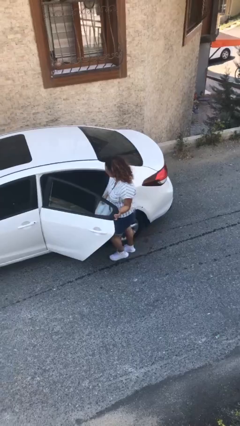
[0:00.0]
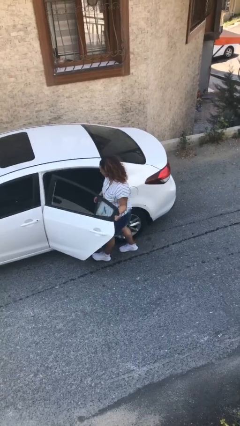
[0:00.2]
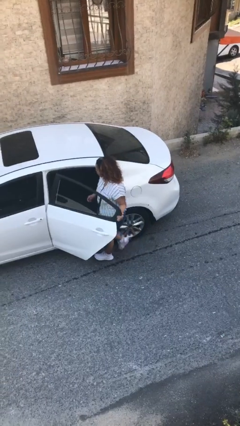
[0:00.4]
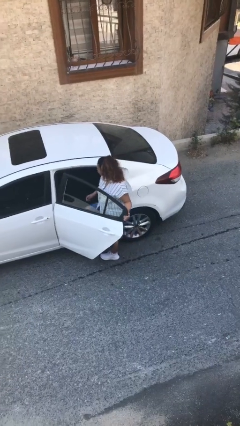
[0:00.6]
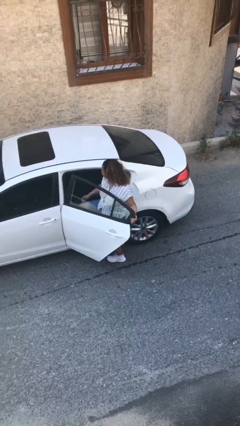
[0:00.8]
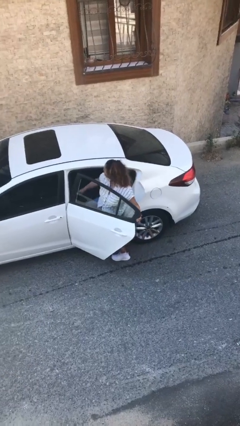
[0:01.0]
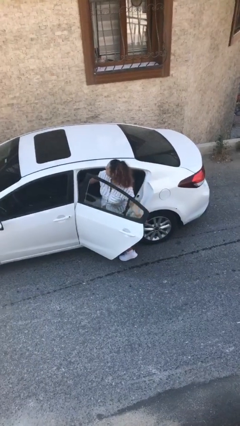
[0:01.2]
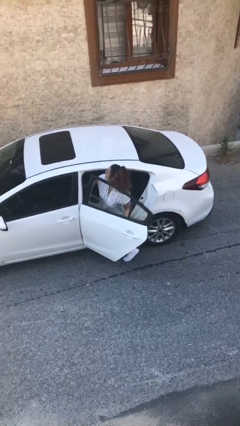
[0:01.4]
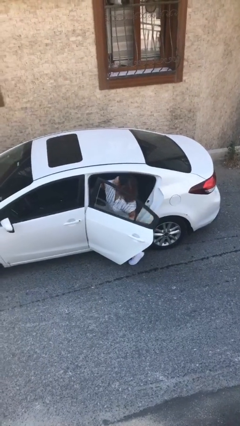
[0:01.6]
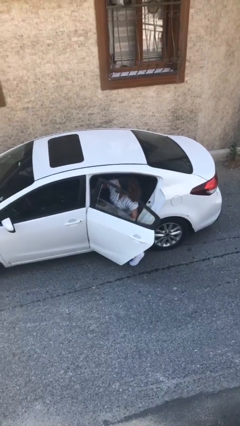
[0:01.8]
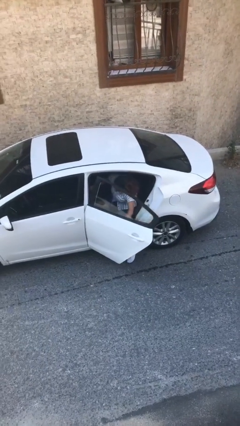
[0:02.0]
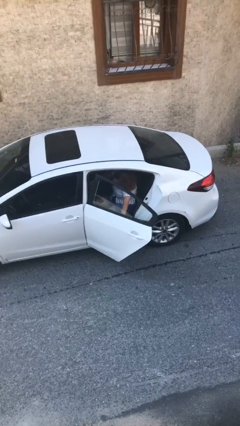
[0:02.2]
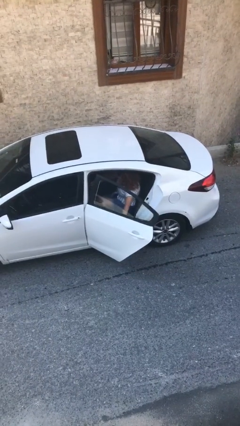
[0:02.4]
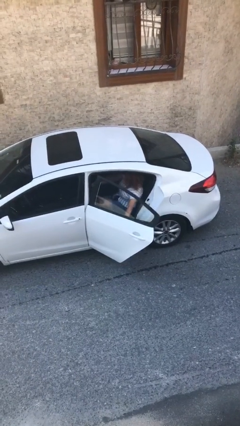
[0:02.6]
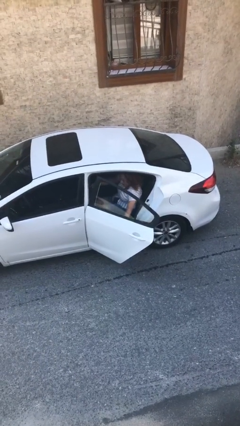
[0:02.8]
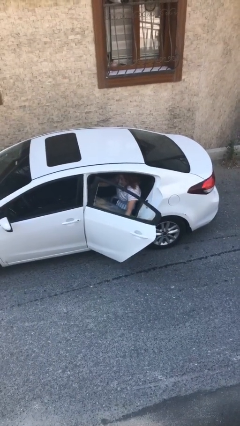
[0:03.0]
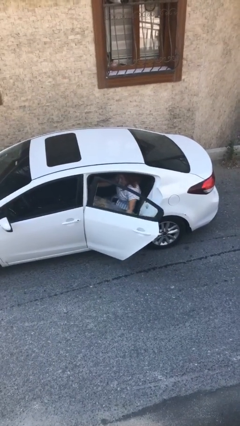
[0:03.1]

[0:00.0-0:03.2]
person enters car

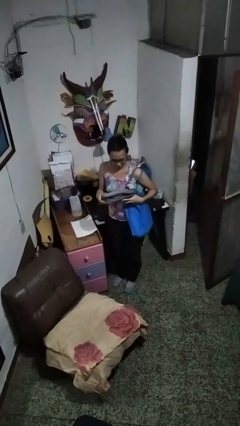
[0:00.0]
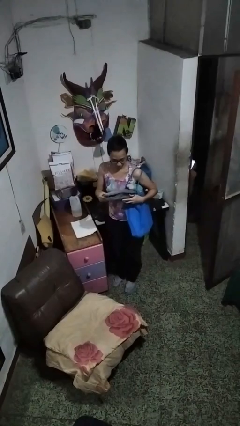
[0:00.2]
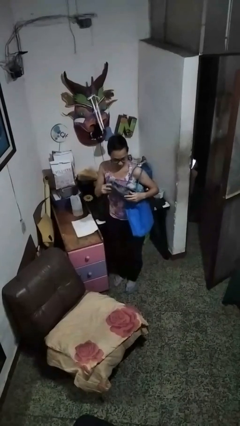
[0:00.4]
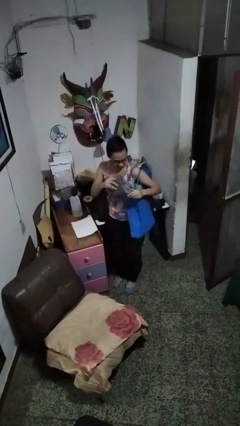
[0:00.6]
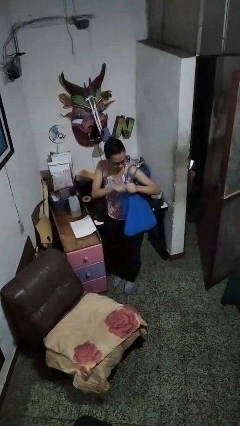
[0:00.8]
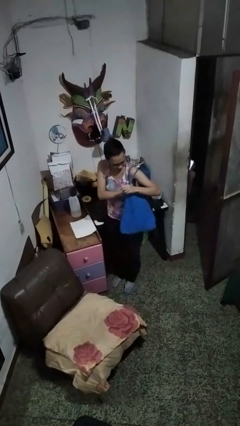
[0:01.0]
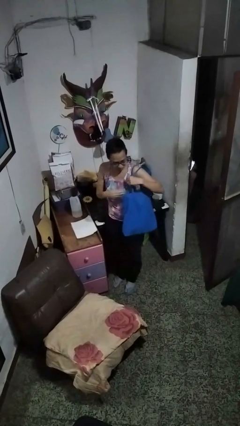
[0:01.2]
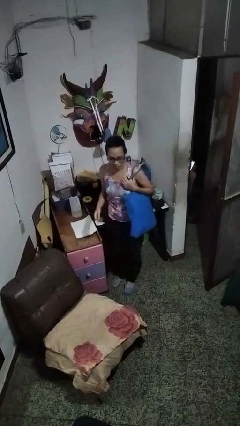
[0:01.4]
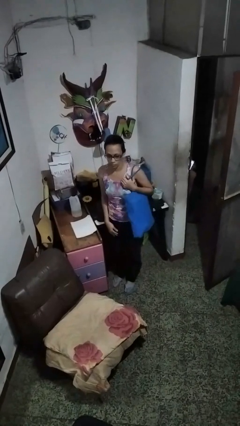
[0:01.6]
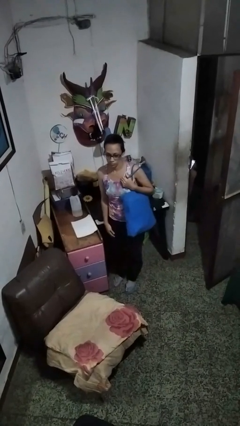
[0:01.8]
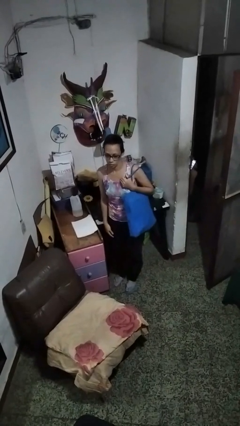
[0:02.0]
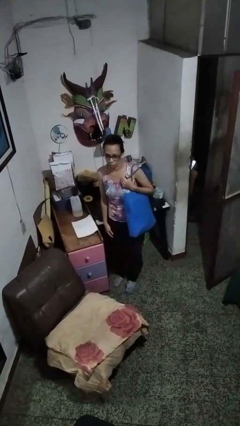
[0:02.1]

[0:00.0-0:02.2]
person puts object into bag

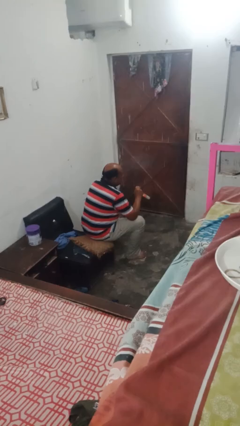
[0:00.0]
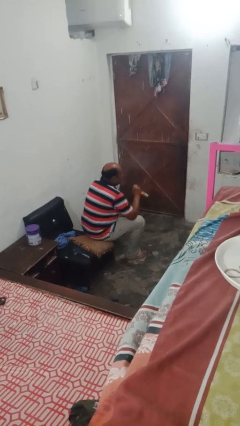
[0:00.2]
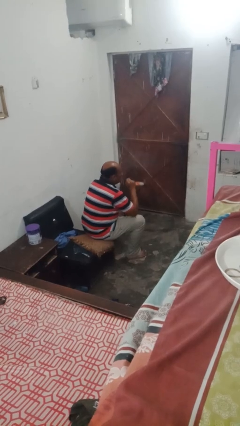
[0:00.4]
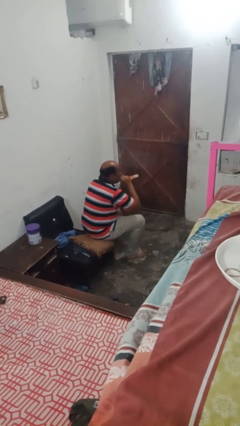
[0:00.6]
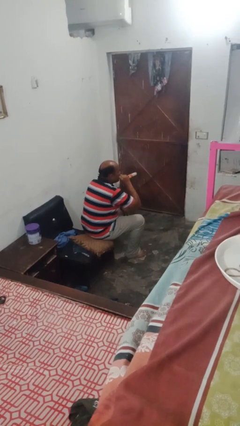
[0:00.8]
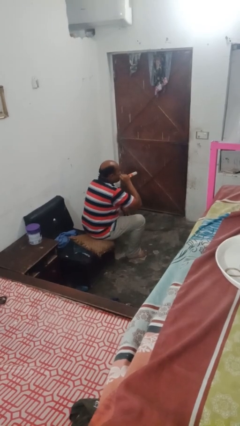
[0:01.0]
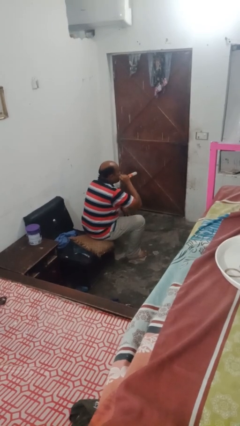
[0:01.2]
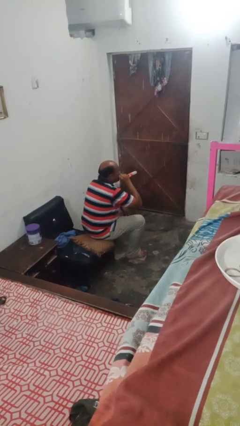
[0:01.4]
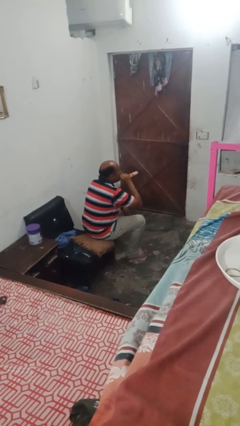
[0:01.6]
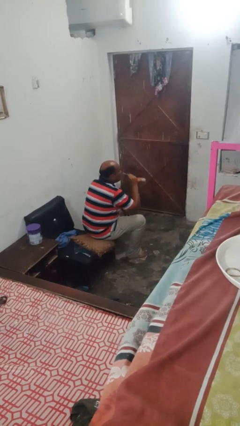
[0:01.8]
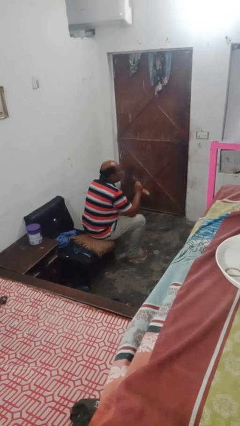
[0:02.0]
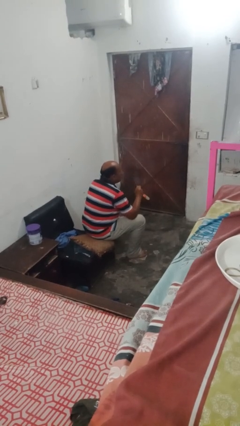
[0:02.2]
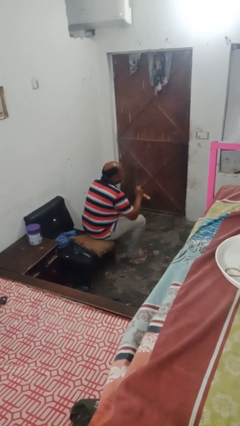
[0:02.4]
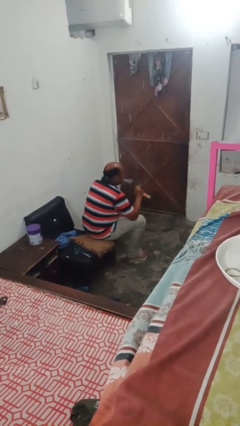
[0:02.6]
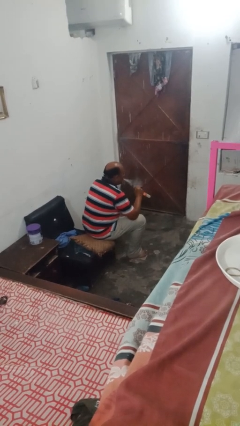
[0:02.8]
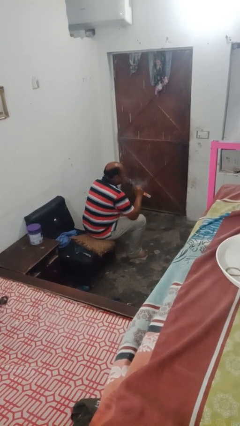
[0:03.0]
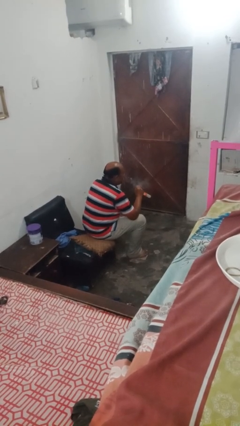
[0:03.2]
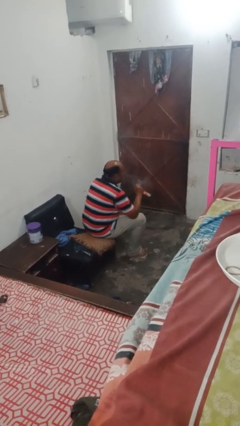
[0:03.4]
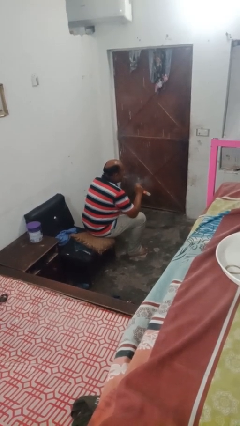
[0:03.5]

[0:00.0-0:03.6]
person vapes

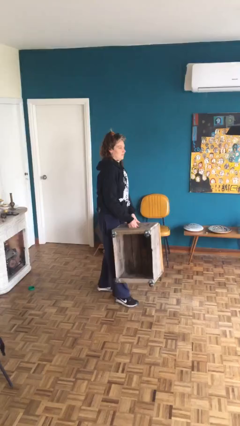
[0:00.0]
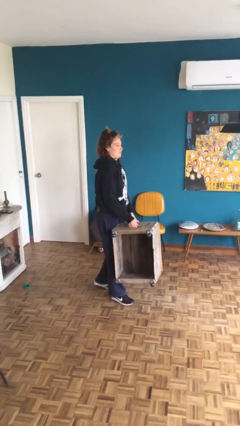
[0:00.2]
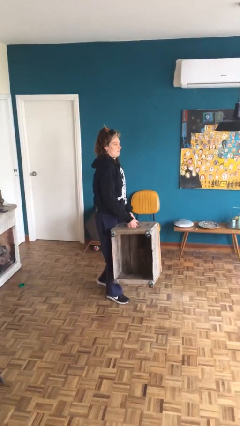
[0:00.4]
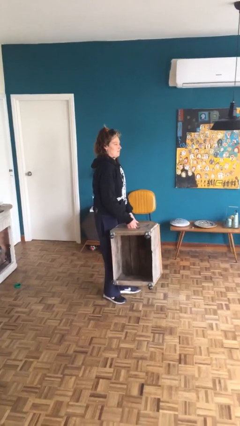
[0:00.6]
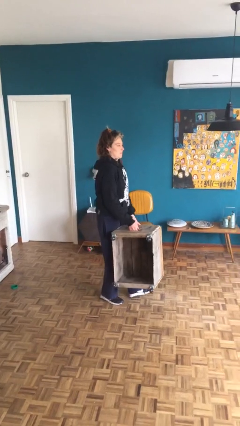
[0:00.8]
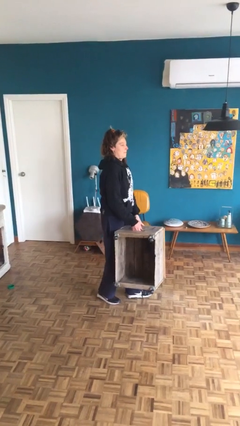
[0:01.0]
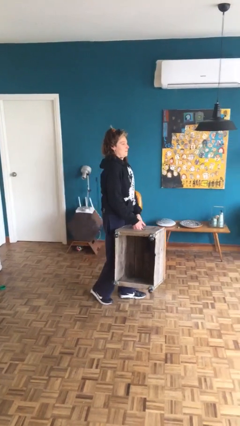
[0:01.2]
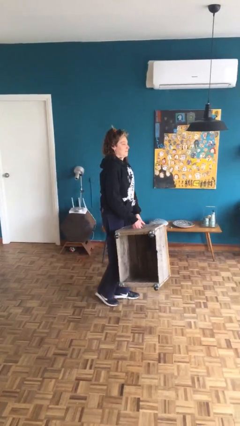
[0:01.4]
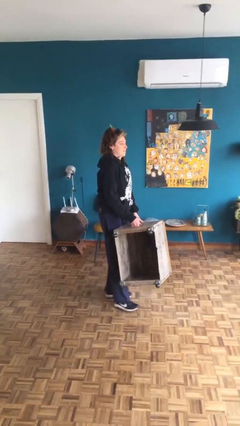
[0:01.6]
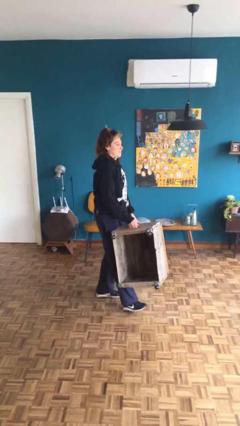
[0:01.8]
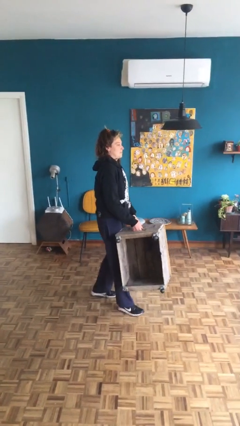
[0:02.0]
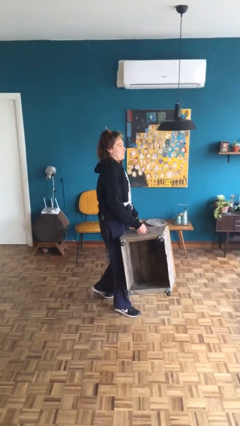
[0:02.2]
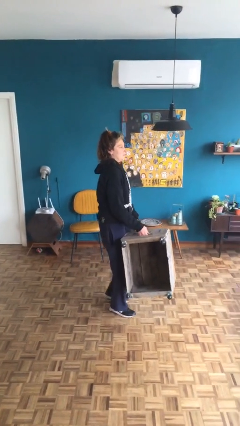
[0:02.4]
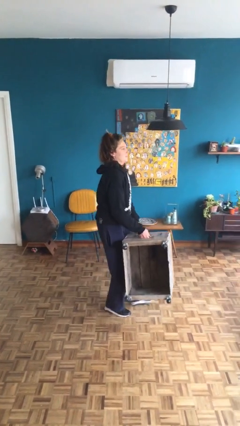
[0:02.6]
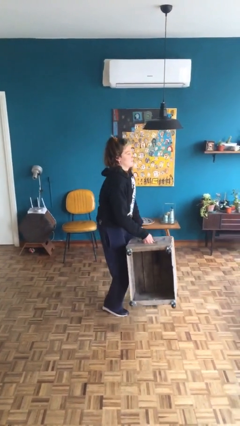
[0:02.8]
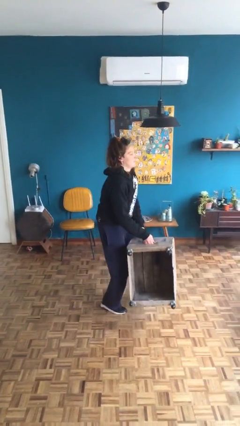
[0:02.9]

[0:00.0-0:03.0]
person carries heavy object

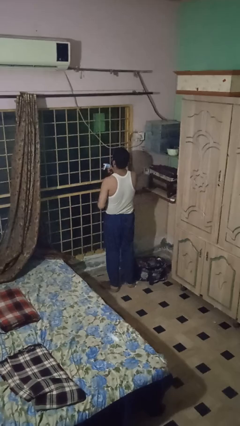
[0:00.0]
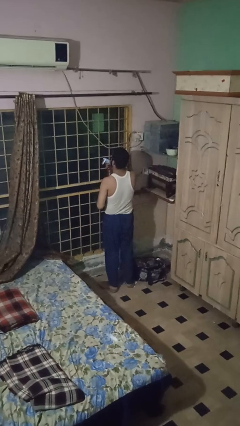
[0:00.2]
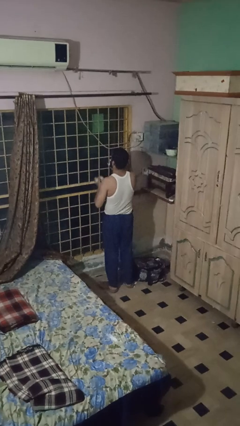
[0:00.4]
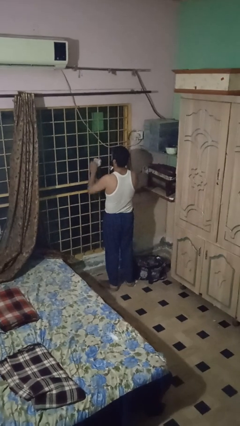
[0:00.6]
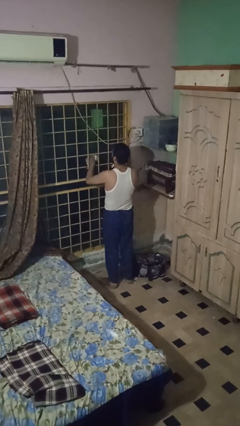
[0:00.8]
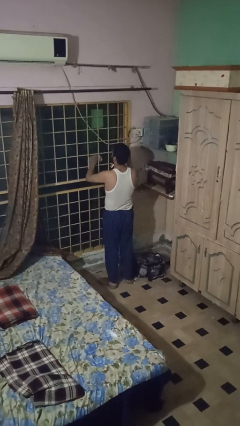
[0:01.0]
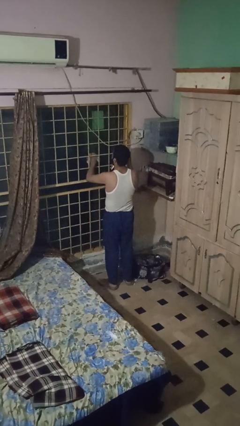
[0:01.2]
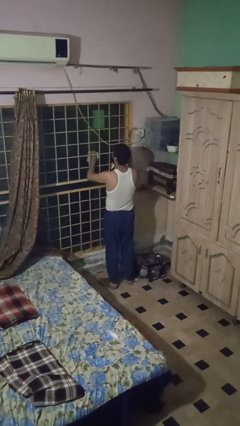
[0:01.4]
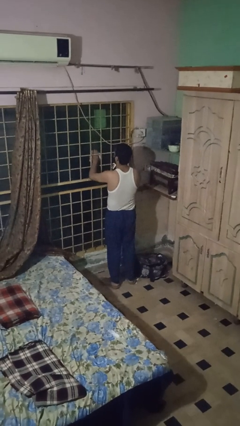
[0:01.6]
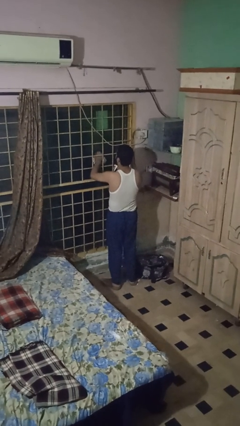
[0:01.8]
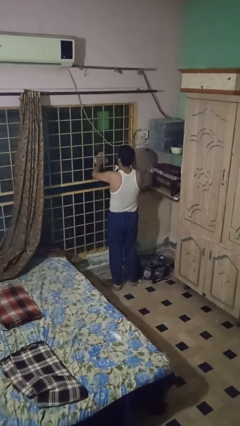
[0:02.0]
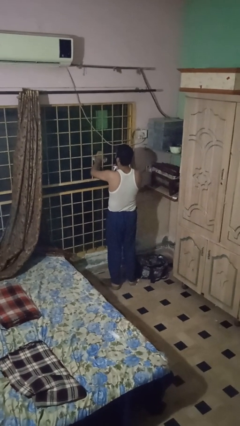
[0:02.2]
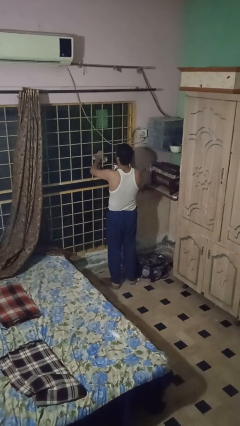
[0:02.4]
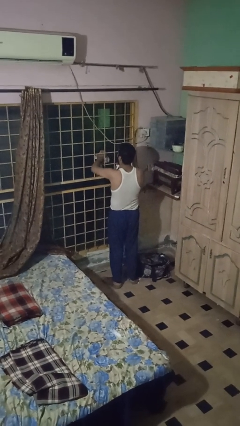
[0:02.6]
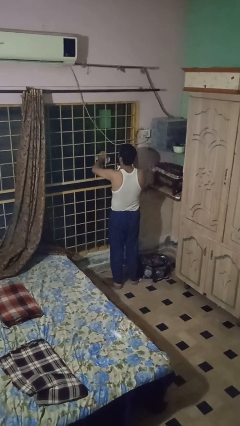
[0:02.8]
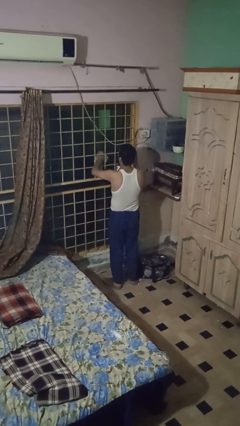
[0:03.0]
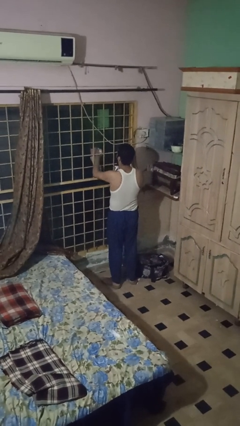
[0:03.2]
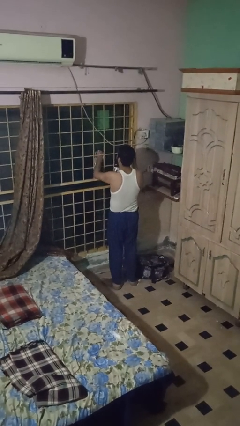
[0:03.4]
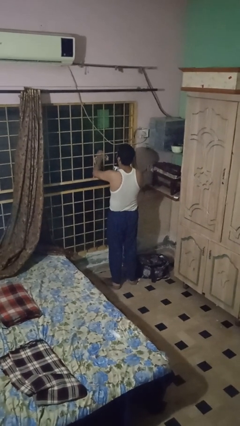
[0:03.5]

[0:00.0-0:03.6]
person washes window

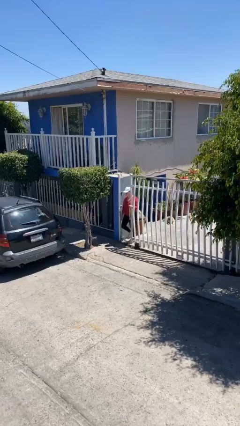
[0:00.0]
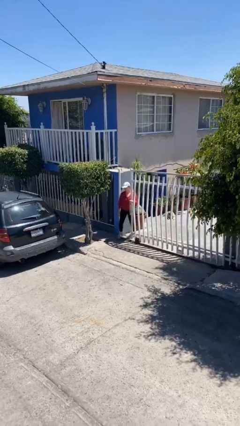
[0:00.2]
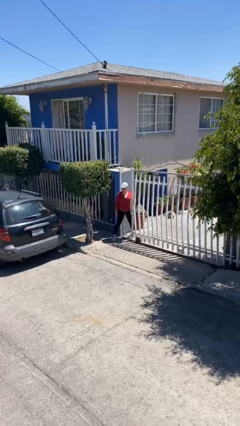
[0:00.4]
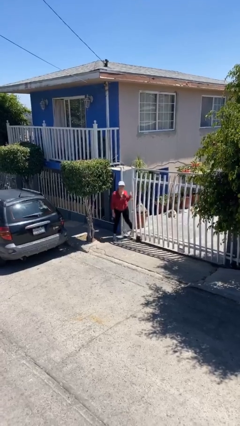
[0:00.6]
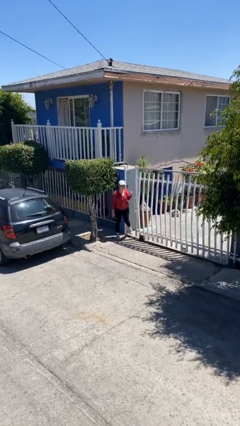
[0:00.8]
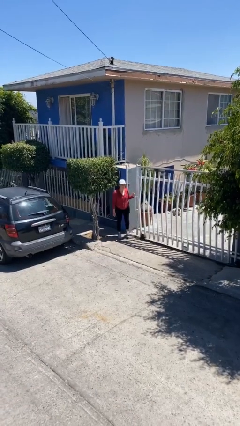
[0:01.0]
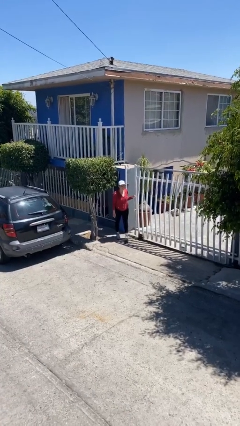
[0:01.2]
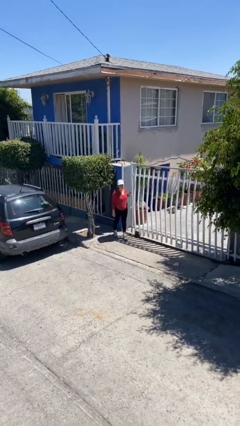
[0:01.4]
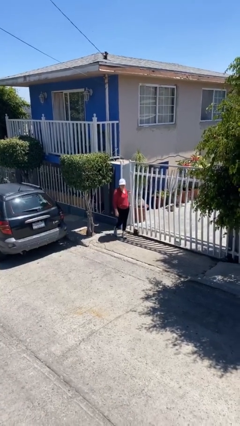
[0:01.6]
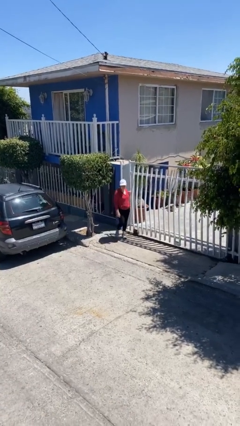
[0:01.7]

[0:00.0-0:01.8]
person enters scene through structure
